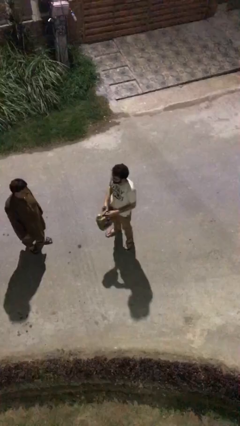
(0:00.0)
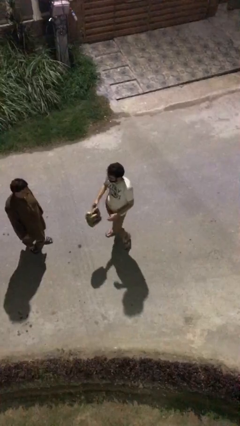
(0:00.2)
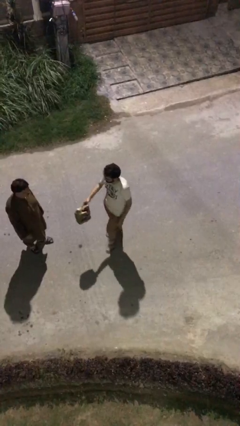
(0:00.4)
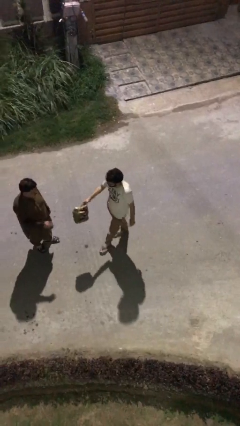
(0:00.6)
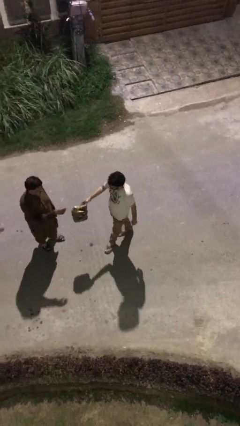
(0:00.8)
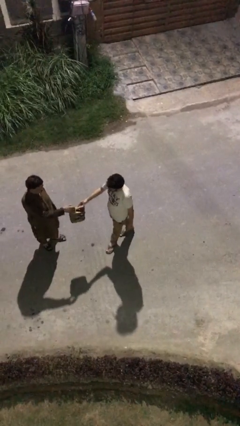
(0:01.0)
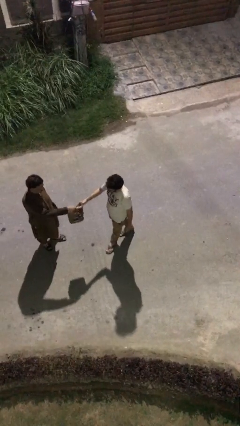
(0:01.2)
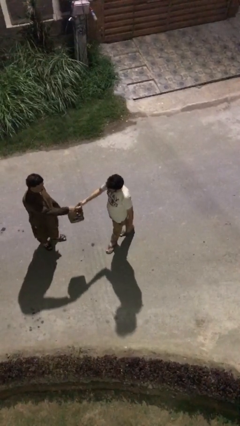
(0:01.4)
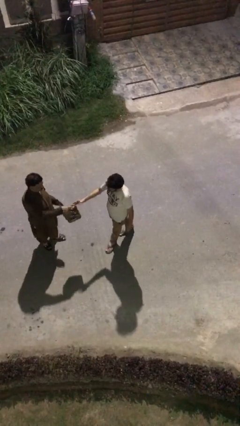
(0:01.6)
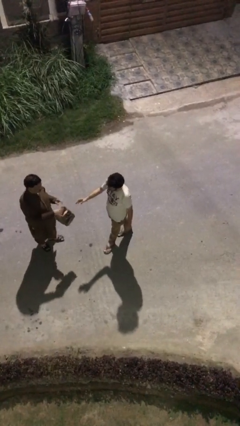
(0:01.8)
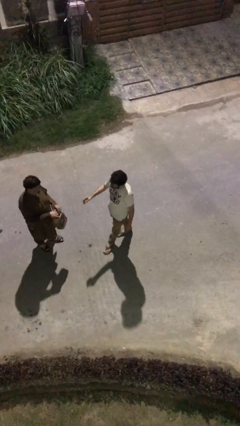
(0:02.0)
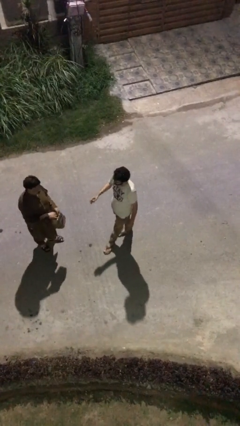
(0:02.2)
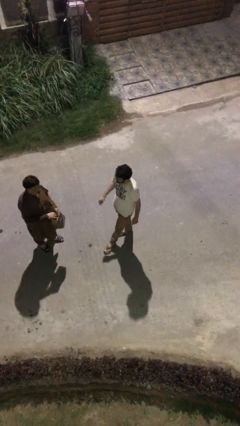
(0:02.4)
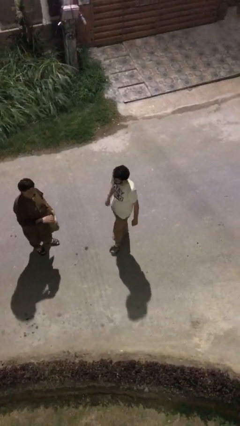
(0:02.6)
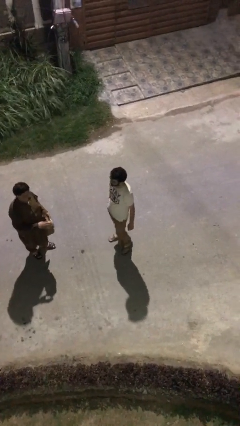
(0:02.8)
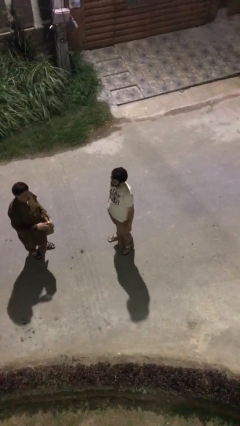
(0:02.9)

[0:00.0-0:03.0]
person transfers object to person

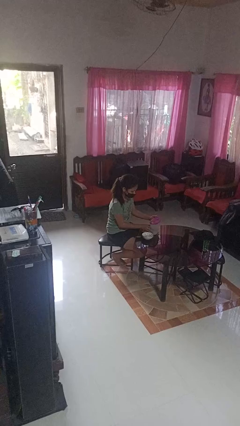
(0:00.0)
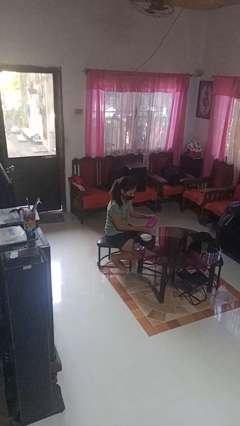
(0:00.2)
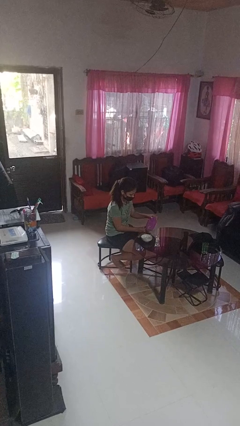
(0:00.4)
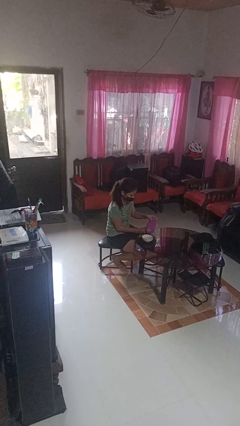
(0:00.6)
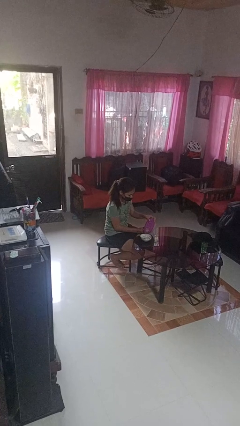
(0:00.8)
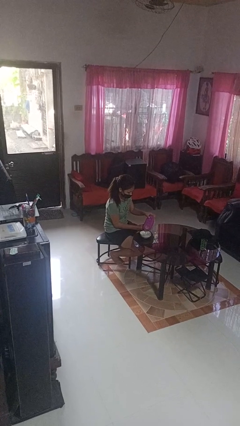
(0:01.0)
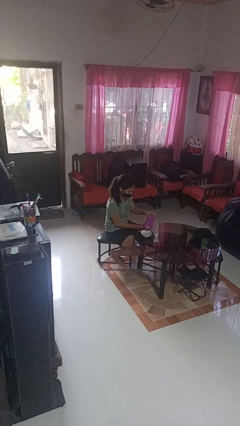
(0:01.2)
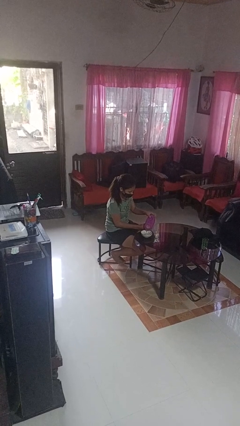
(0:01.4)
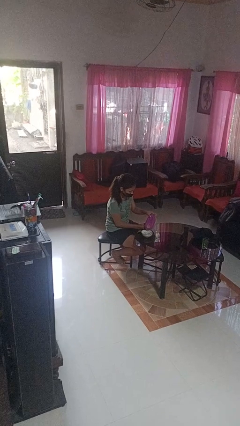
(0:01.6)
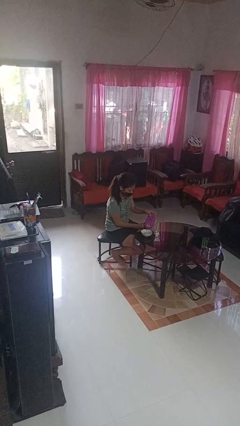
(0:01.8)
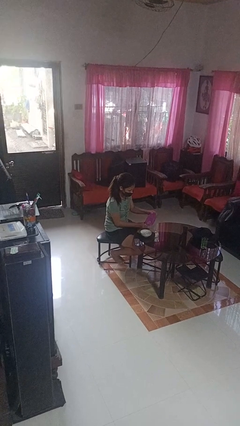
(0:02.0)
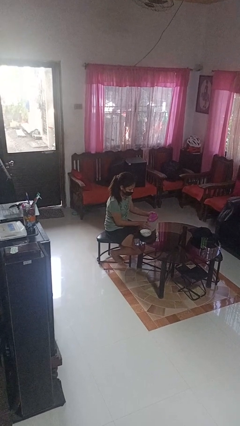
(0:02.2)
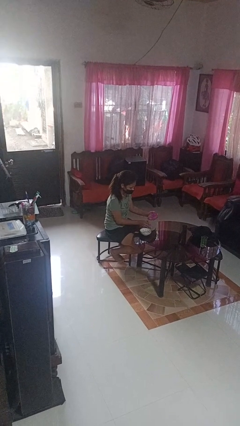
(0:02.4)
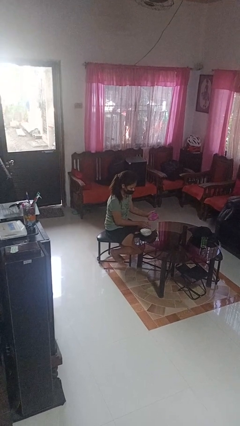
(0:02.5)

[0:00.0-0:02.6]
person pours into bowl

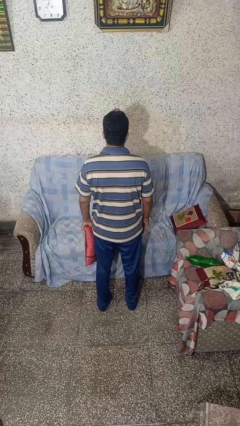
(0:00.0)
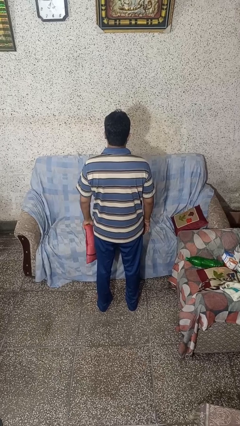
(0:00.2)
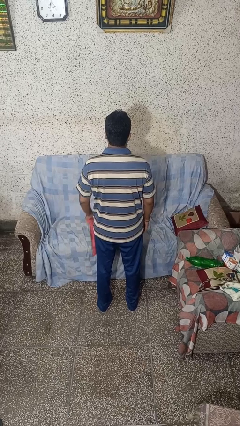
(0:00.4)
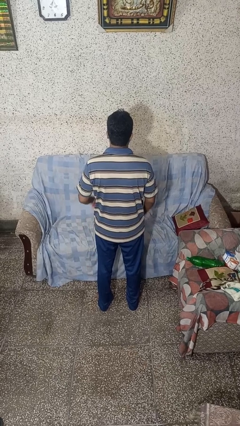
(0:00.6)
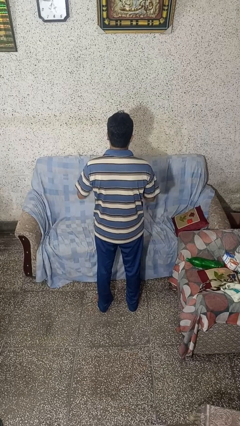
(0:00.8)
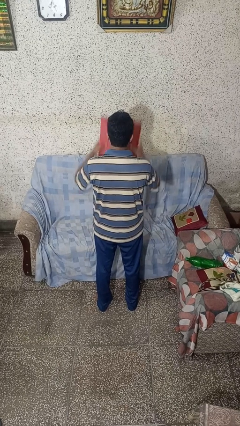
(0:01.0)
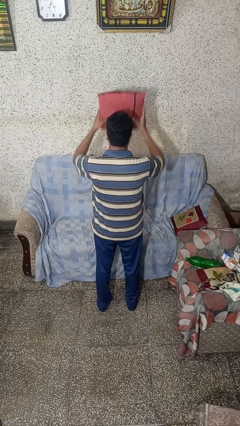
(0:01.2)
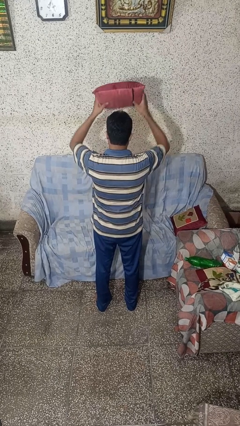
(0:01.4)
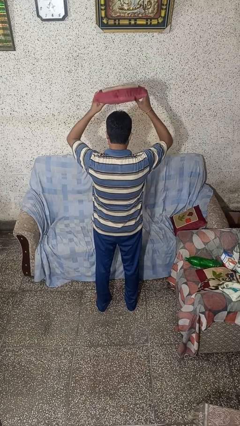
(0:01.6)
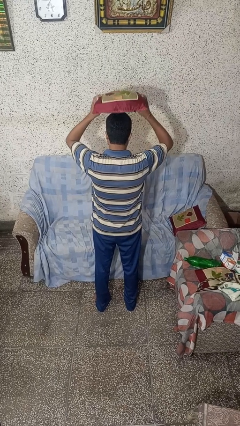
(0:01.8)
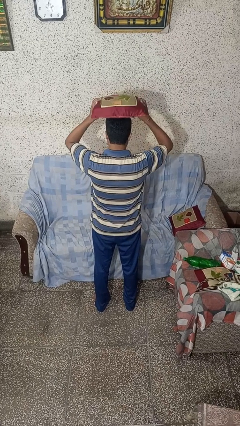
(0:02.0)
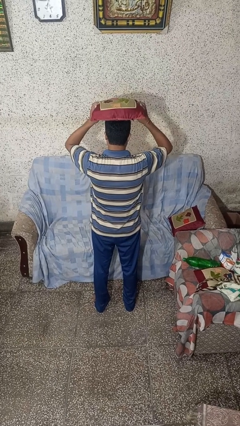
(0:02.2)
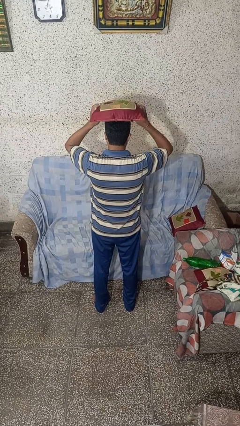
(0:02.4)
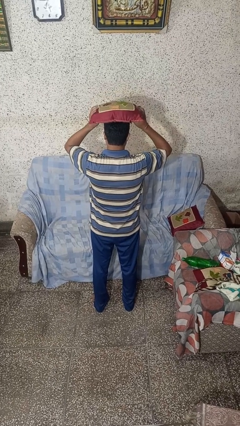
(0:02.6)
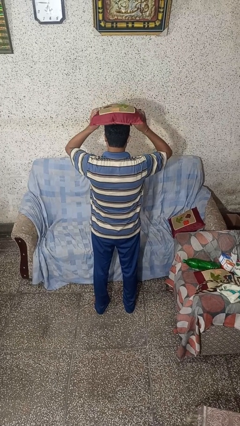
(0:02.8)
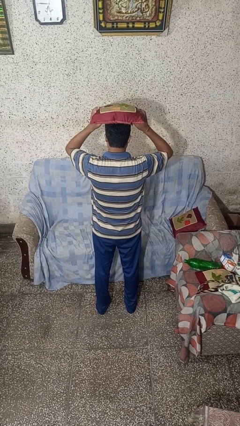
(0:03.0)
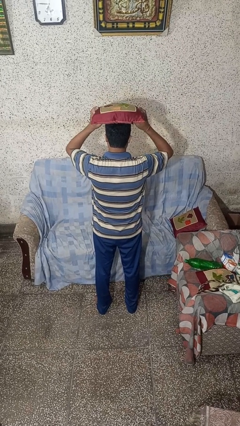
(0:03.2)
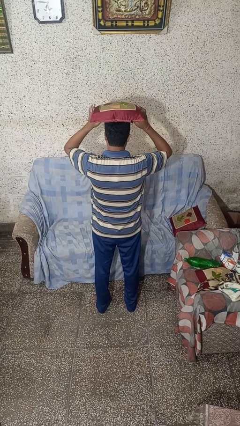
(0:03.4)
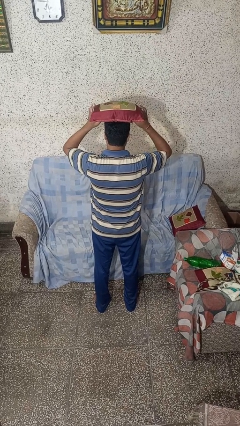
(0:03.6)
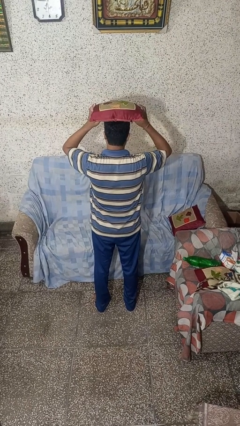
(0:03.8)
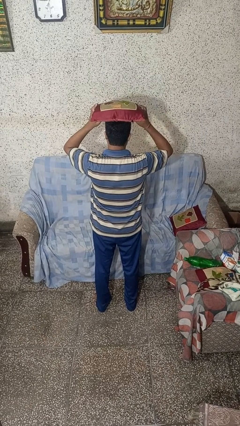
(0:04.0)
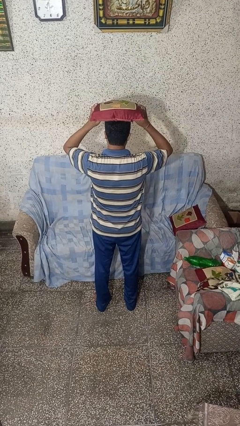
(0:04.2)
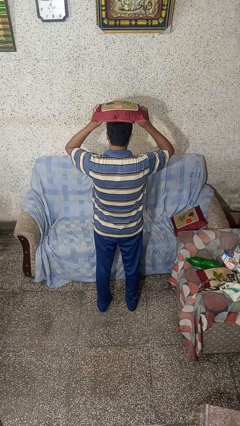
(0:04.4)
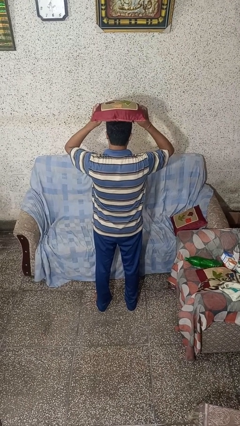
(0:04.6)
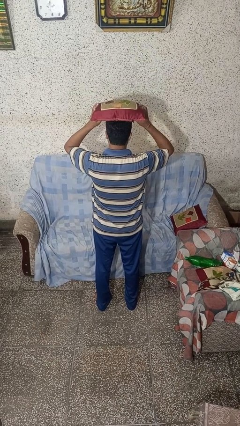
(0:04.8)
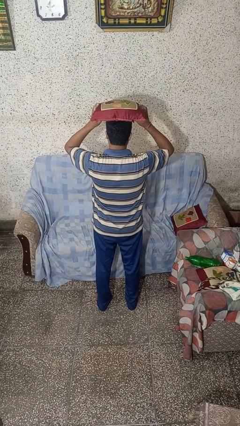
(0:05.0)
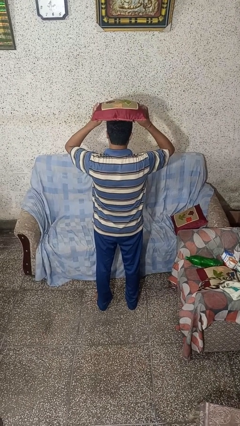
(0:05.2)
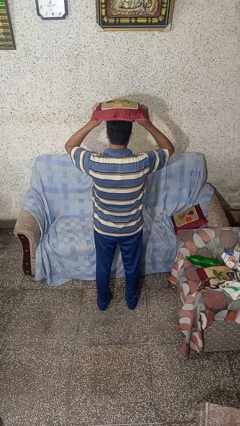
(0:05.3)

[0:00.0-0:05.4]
person holds object above head

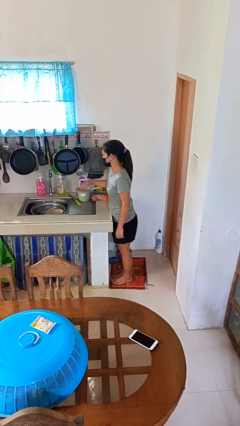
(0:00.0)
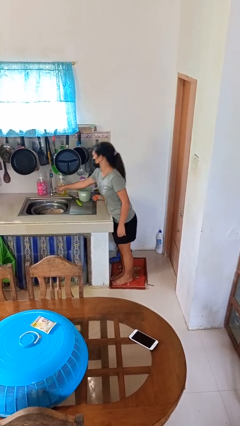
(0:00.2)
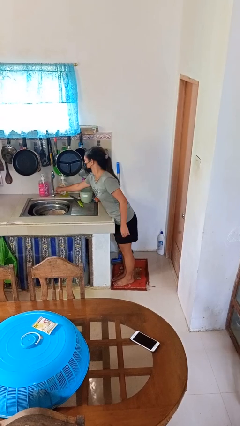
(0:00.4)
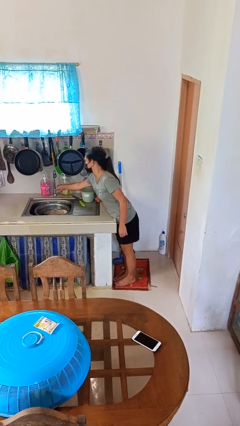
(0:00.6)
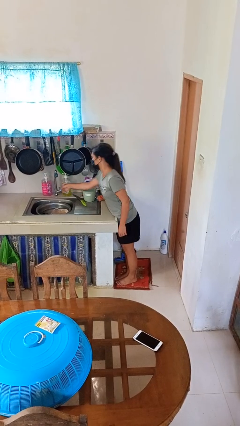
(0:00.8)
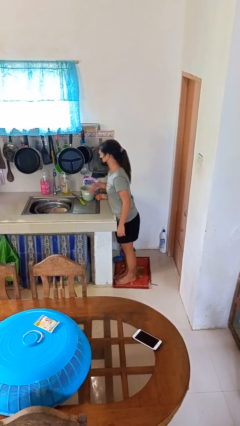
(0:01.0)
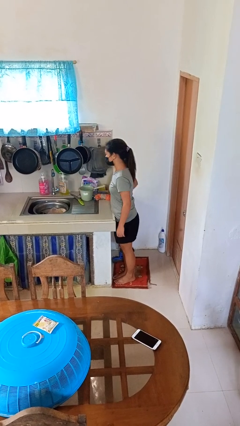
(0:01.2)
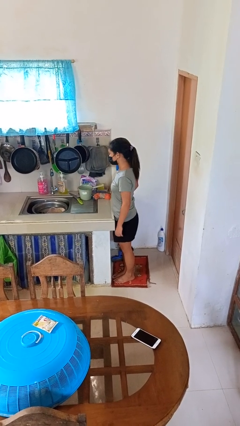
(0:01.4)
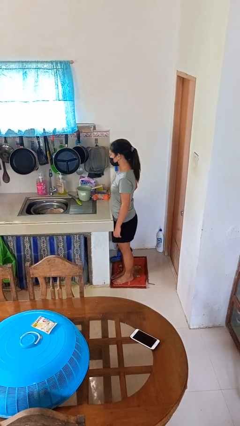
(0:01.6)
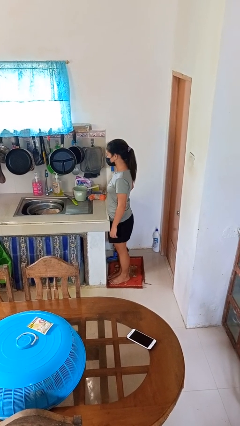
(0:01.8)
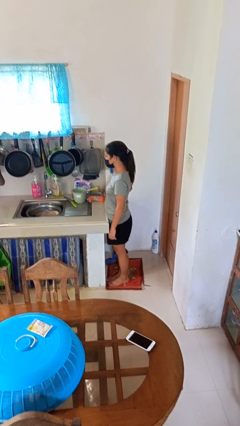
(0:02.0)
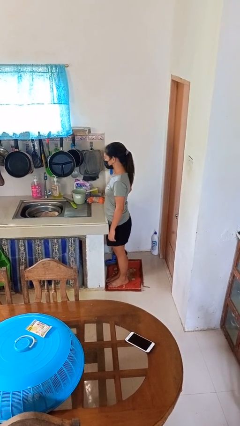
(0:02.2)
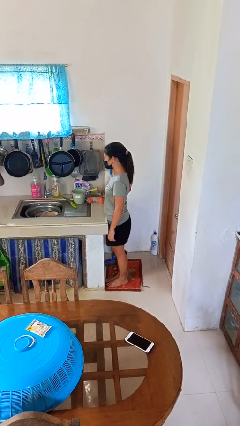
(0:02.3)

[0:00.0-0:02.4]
person turns off faucet

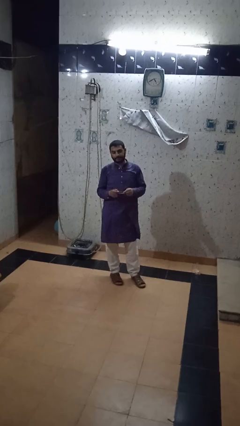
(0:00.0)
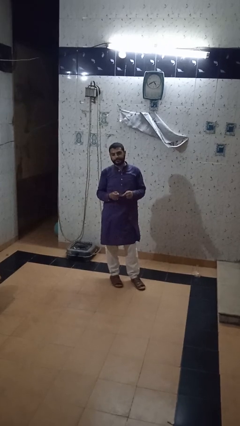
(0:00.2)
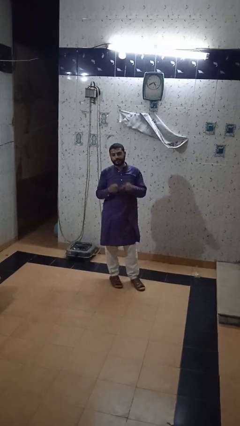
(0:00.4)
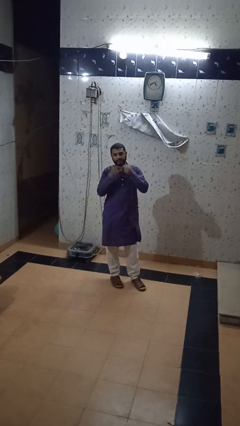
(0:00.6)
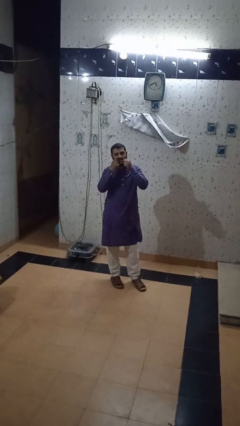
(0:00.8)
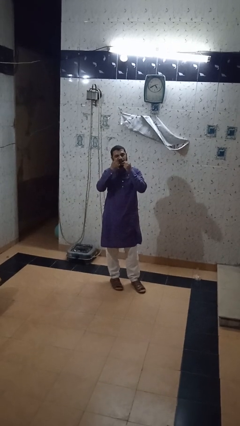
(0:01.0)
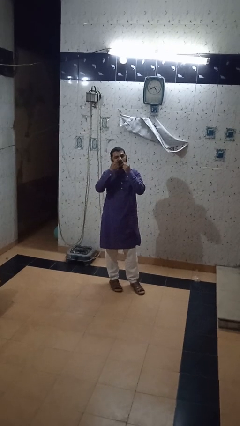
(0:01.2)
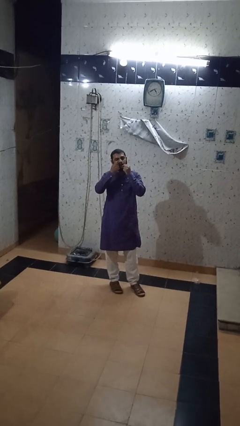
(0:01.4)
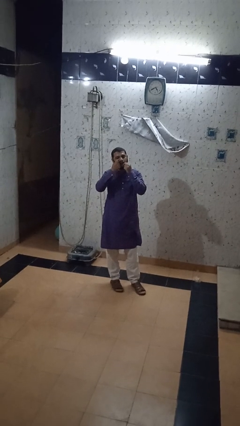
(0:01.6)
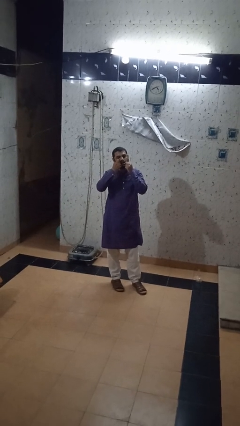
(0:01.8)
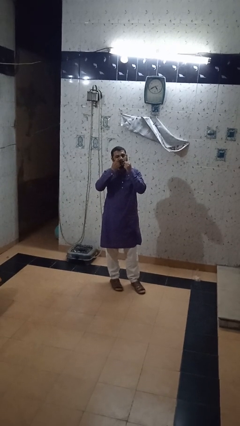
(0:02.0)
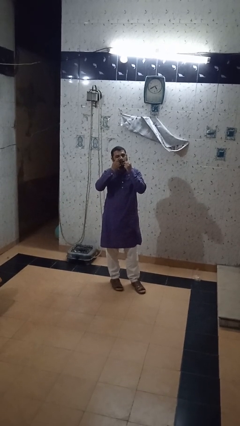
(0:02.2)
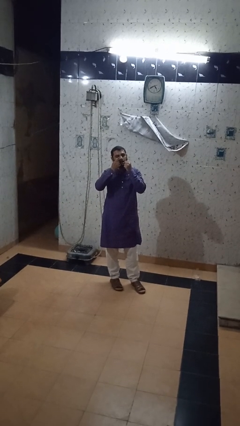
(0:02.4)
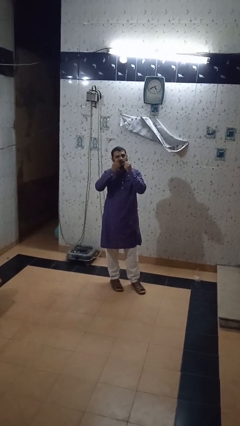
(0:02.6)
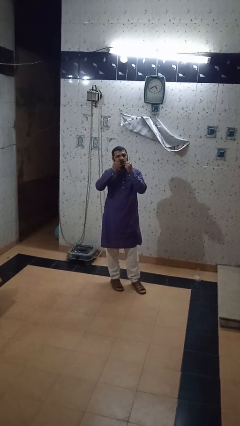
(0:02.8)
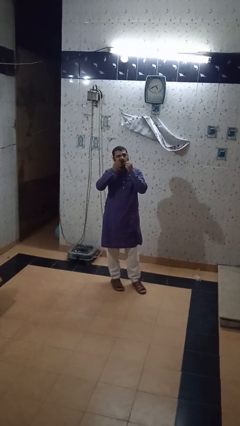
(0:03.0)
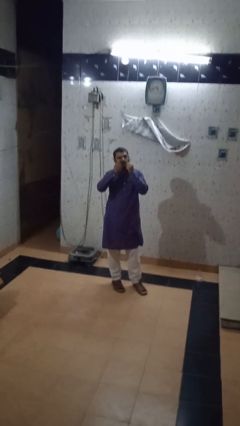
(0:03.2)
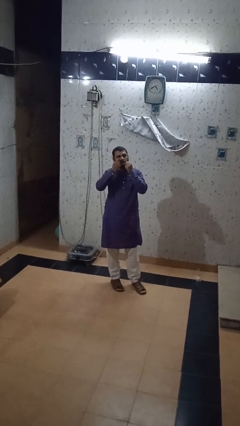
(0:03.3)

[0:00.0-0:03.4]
person flosses

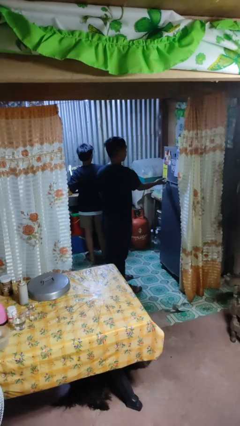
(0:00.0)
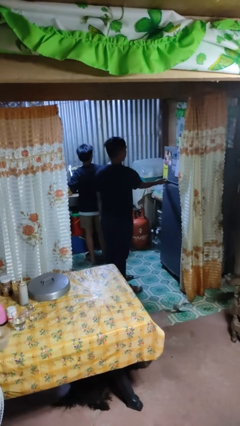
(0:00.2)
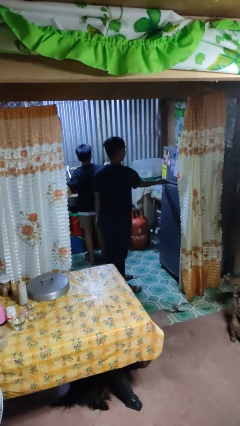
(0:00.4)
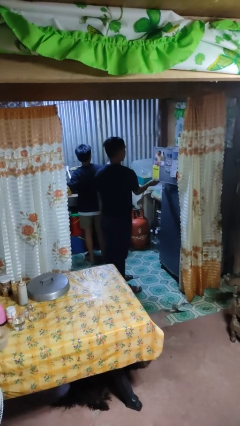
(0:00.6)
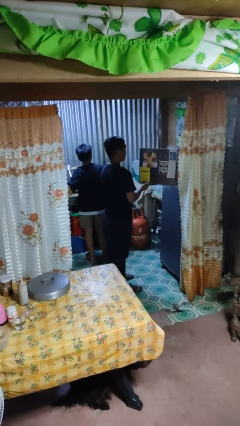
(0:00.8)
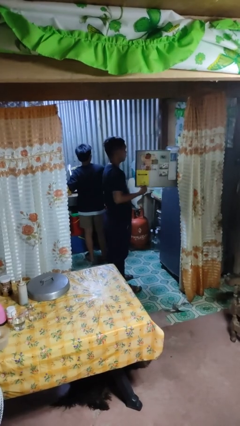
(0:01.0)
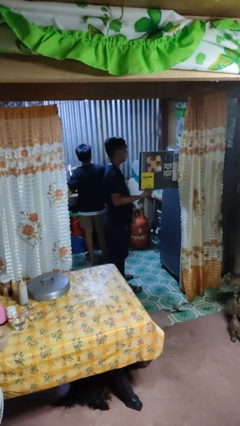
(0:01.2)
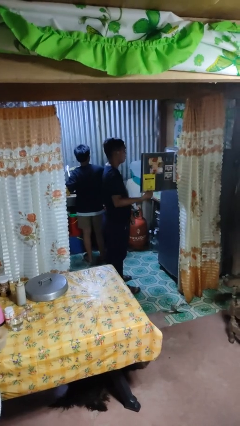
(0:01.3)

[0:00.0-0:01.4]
person opens refrigerator
